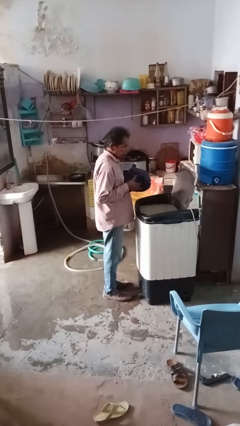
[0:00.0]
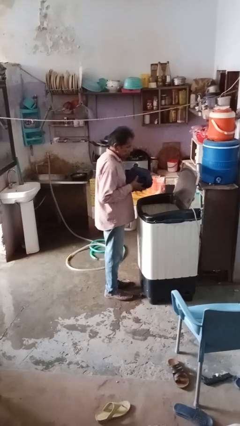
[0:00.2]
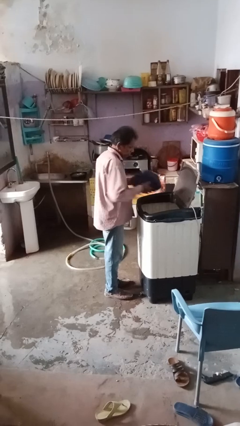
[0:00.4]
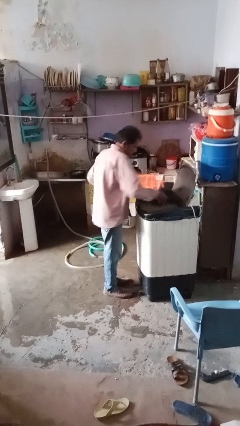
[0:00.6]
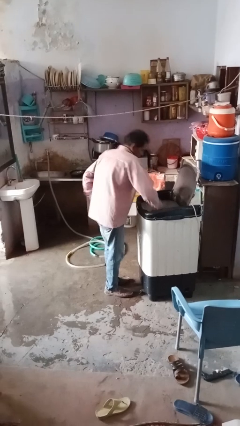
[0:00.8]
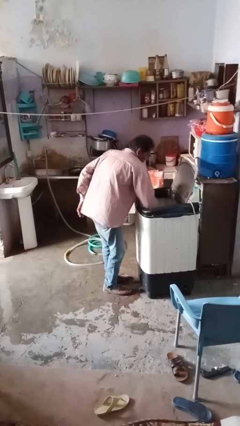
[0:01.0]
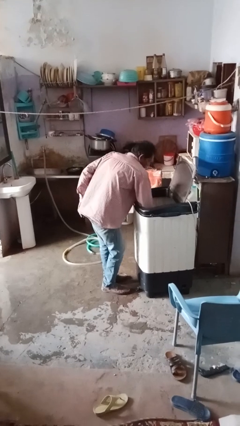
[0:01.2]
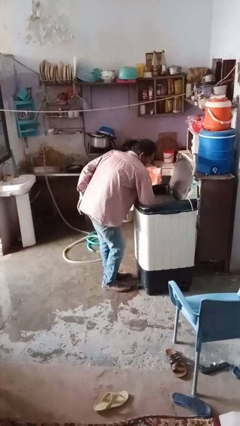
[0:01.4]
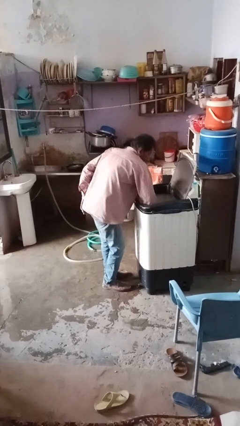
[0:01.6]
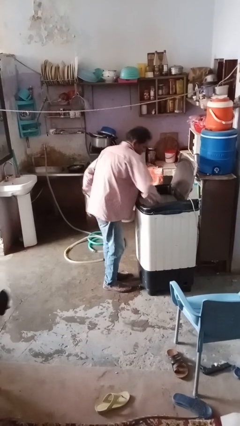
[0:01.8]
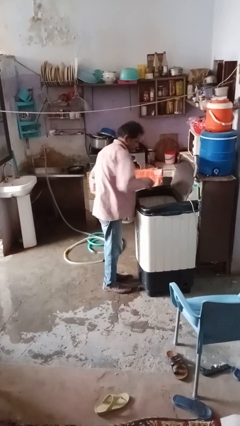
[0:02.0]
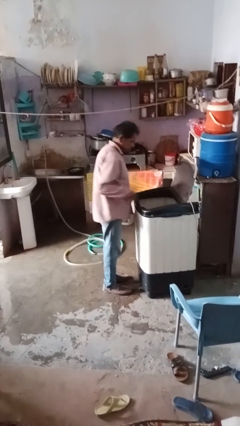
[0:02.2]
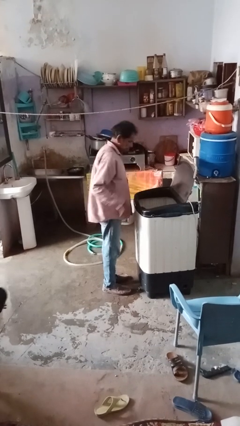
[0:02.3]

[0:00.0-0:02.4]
person loads clotheswasher

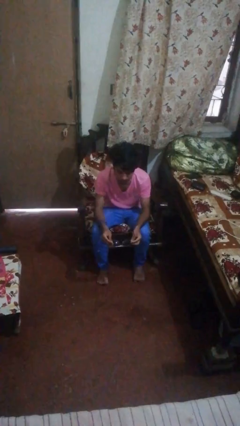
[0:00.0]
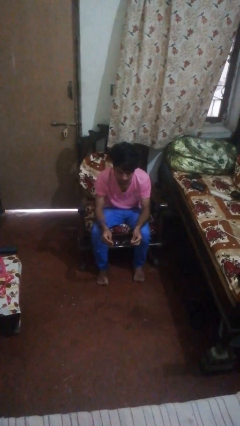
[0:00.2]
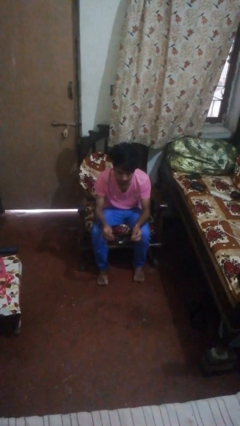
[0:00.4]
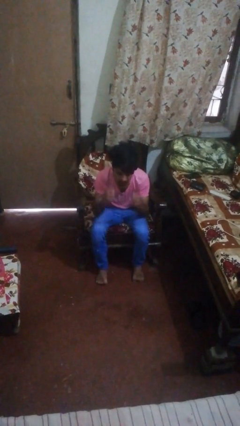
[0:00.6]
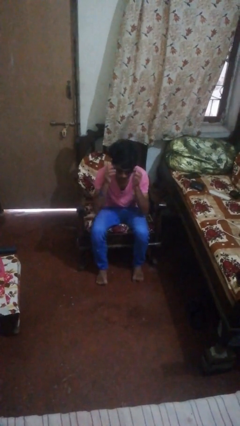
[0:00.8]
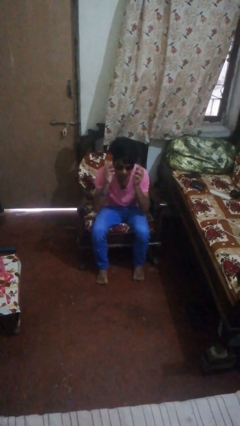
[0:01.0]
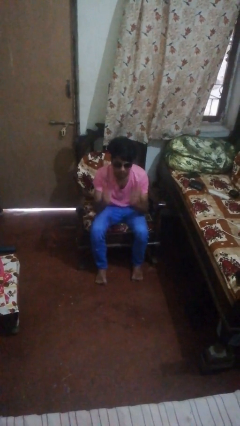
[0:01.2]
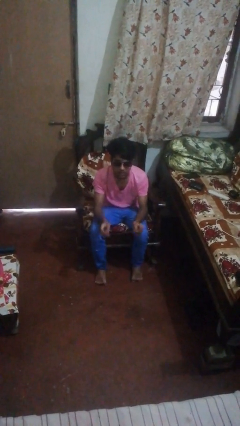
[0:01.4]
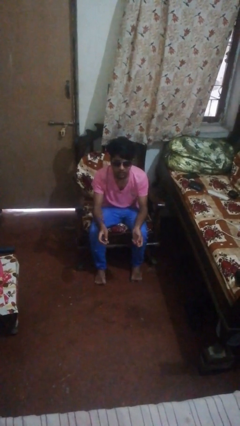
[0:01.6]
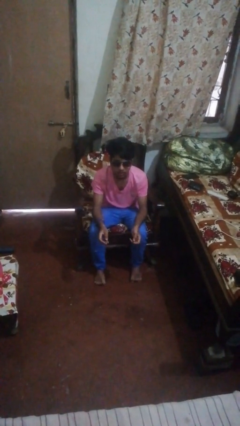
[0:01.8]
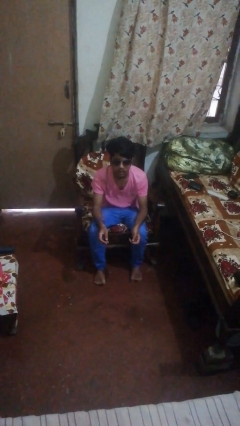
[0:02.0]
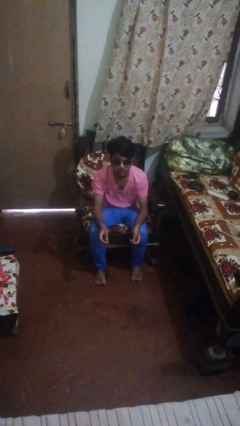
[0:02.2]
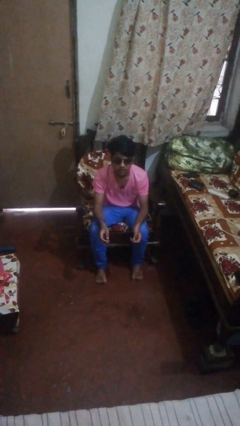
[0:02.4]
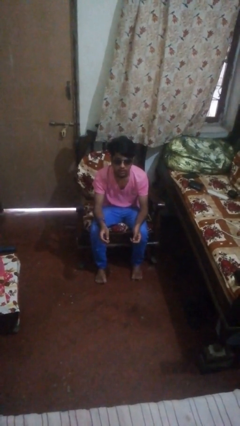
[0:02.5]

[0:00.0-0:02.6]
person puts on sunglasses

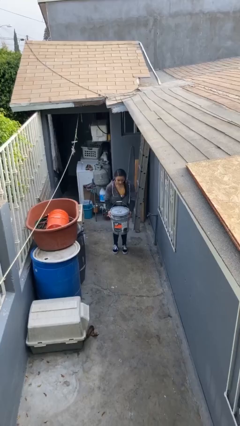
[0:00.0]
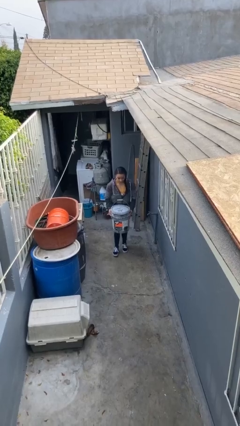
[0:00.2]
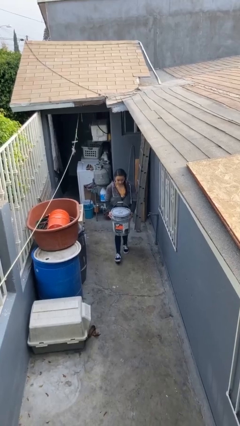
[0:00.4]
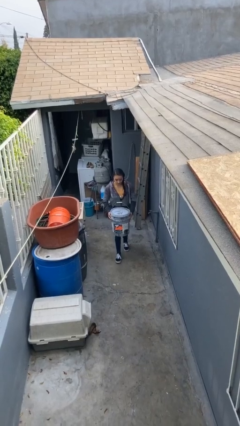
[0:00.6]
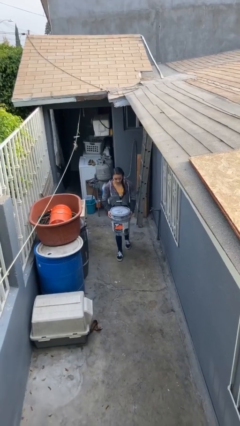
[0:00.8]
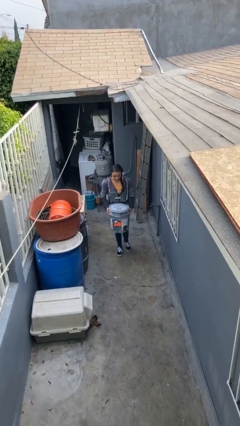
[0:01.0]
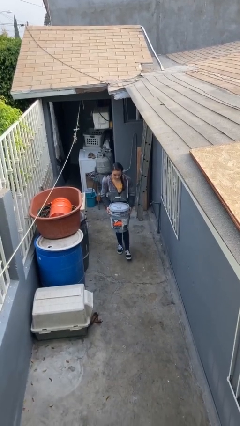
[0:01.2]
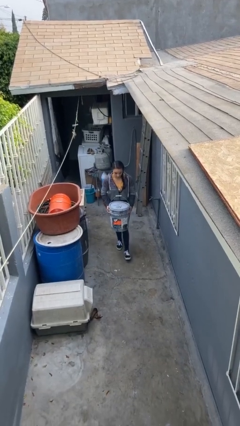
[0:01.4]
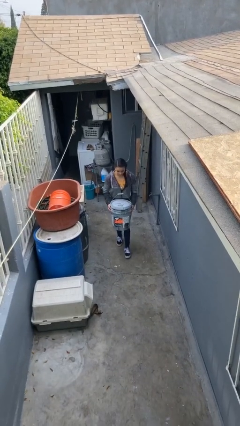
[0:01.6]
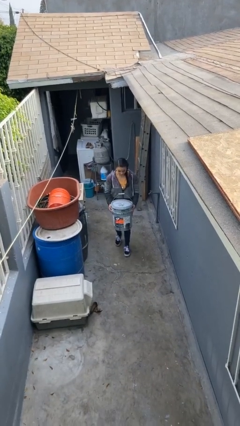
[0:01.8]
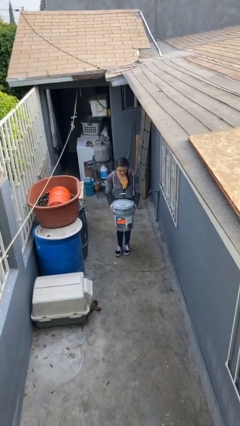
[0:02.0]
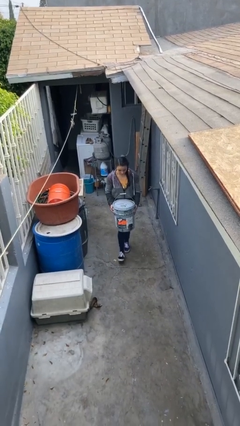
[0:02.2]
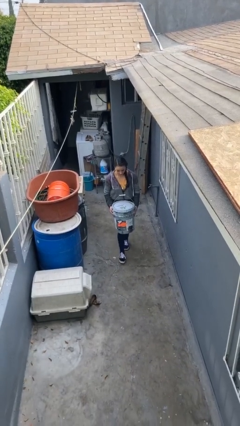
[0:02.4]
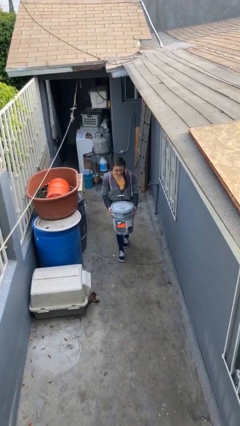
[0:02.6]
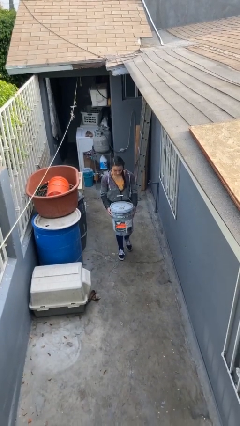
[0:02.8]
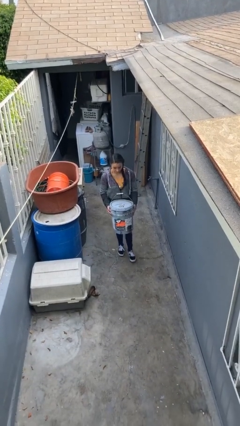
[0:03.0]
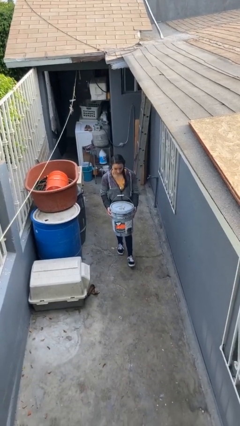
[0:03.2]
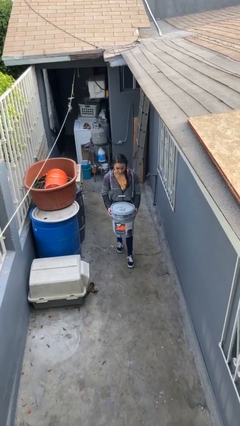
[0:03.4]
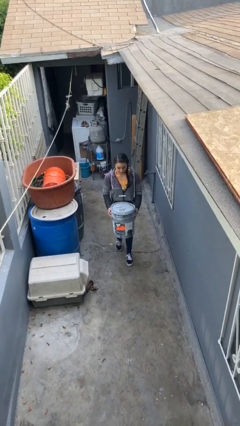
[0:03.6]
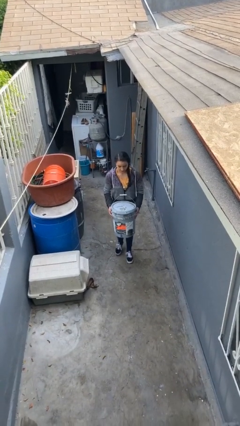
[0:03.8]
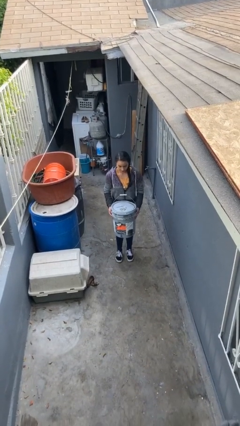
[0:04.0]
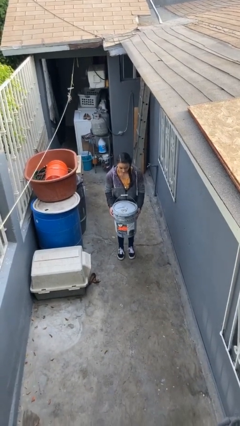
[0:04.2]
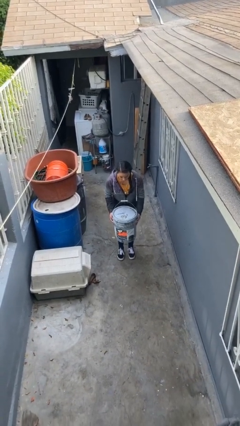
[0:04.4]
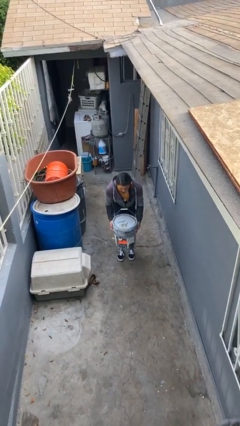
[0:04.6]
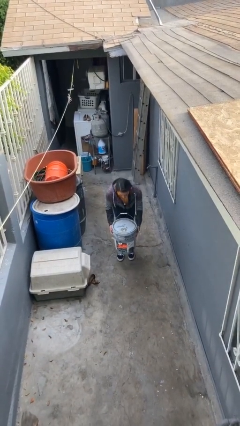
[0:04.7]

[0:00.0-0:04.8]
person carries heavy object

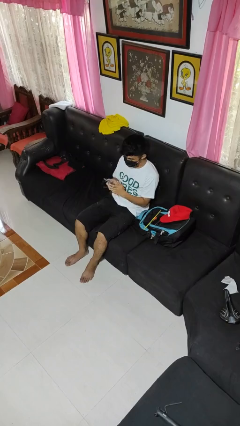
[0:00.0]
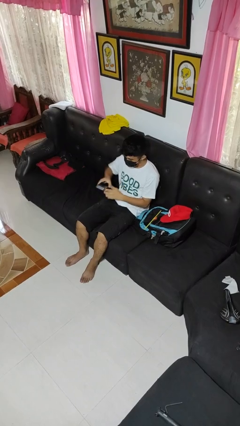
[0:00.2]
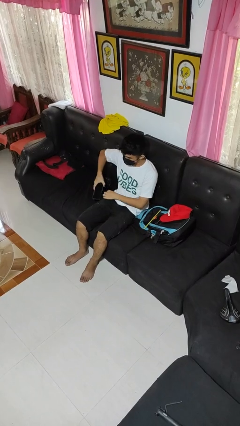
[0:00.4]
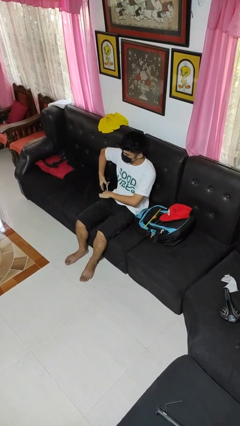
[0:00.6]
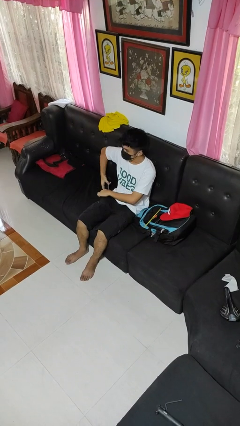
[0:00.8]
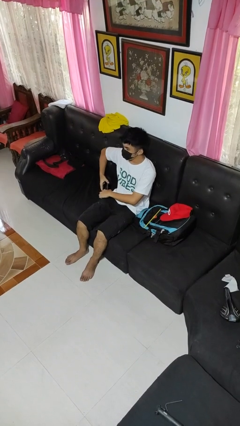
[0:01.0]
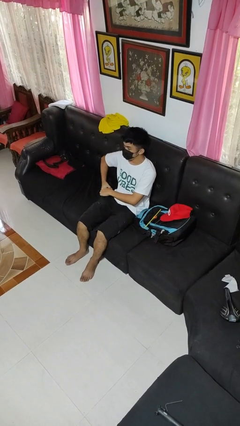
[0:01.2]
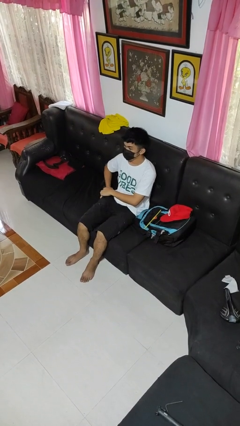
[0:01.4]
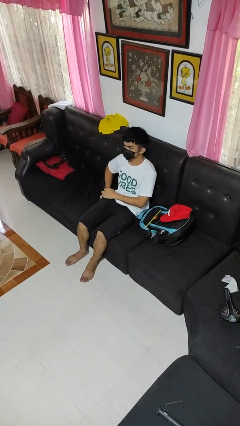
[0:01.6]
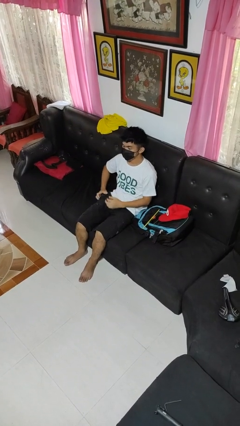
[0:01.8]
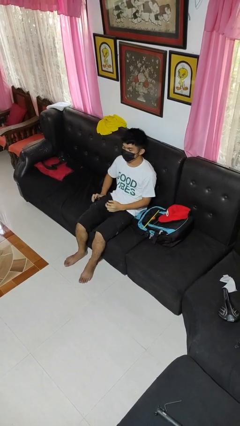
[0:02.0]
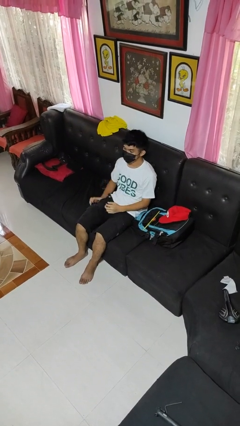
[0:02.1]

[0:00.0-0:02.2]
person puts phone into pocket

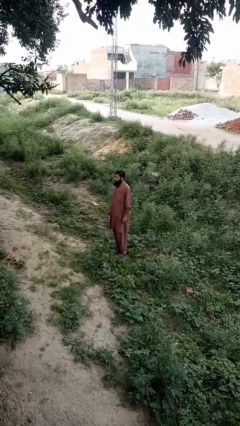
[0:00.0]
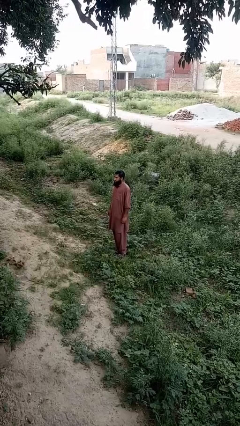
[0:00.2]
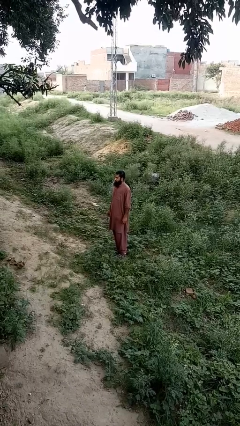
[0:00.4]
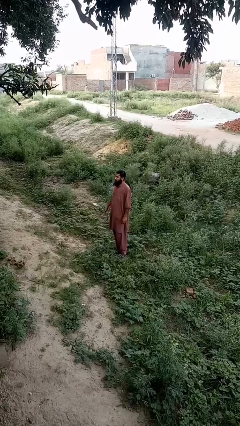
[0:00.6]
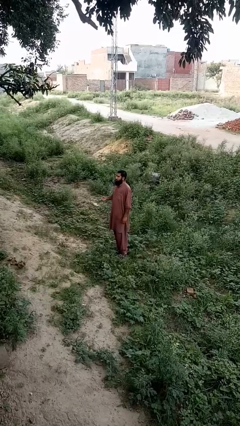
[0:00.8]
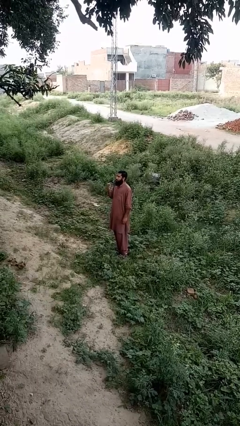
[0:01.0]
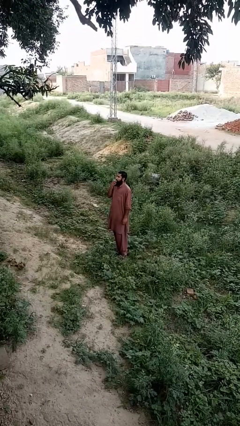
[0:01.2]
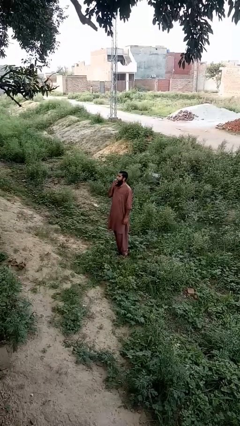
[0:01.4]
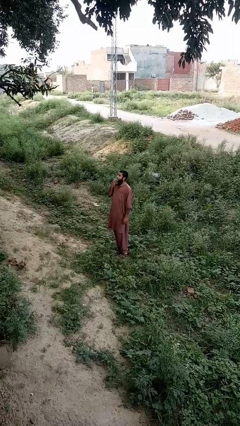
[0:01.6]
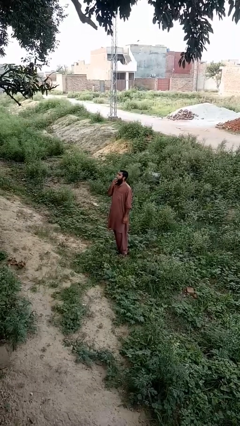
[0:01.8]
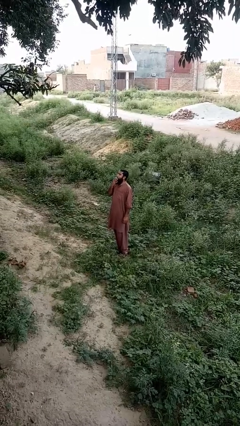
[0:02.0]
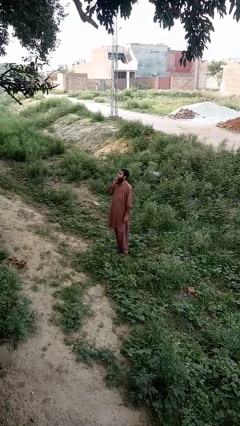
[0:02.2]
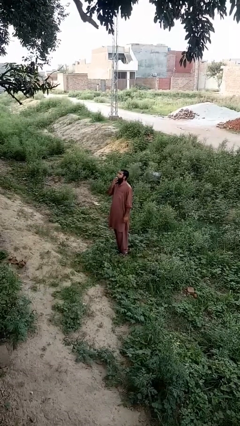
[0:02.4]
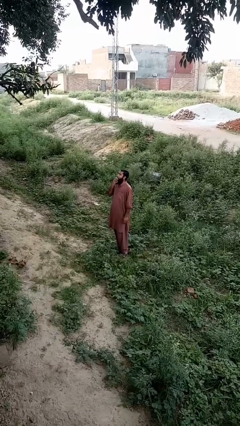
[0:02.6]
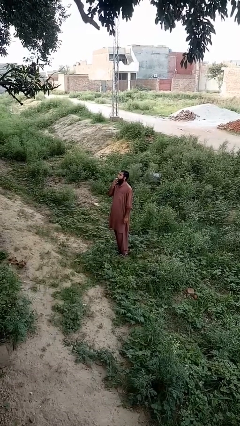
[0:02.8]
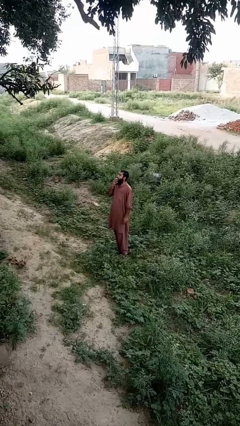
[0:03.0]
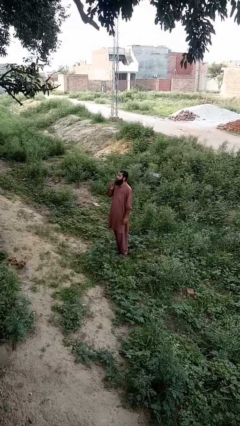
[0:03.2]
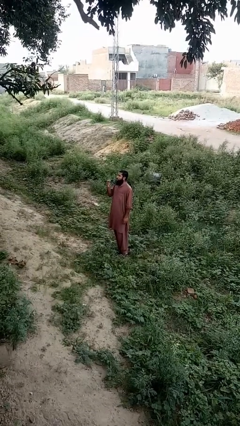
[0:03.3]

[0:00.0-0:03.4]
person vapes

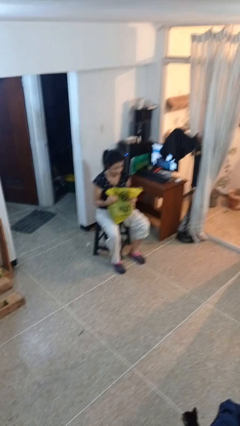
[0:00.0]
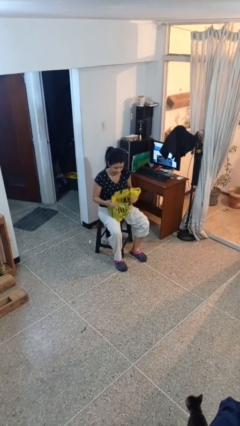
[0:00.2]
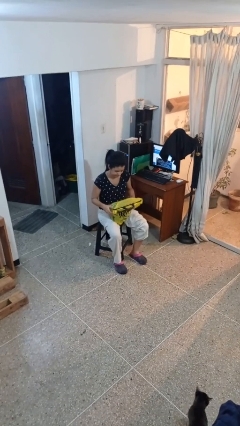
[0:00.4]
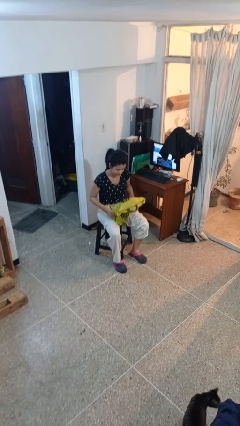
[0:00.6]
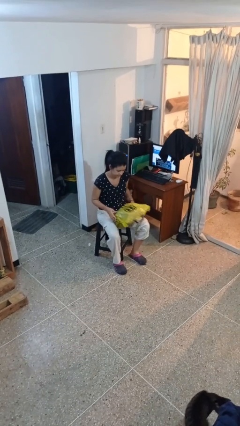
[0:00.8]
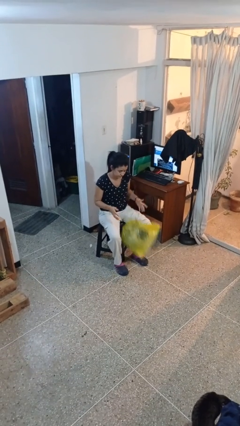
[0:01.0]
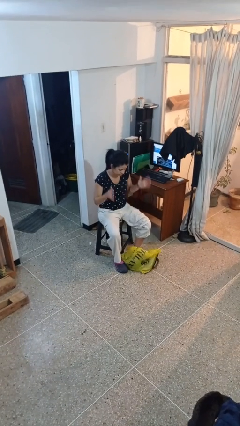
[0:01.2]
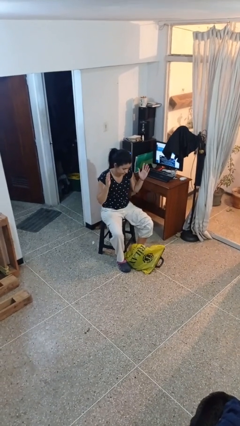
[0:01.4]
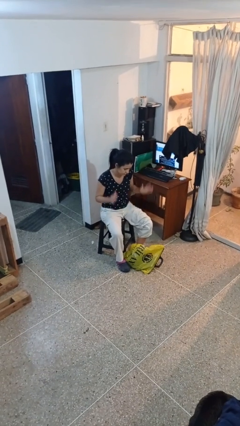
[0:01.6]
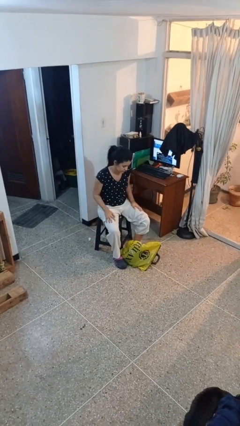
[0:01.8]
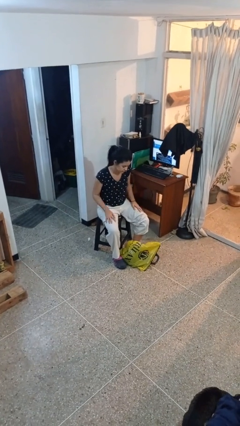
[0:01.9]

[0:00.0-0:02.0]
person drops object

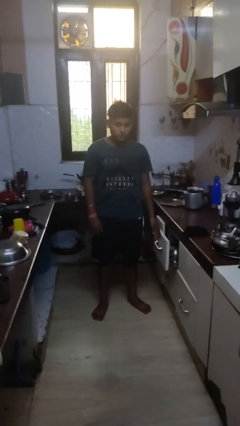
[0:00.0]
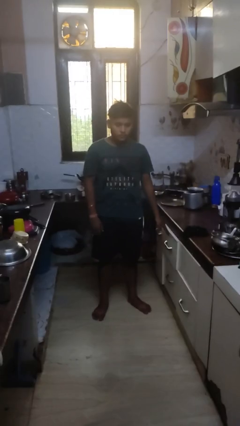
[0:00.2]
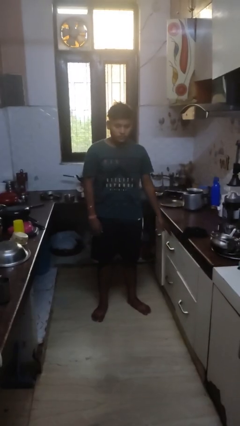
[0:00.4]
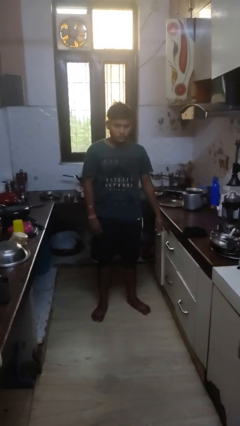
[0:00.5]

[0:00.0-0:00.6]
person closes kitchen drawer
